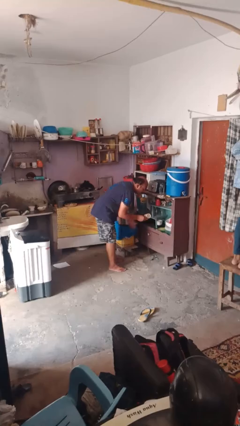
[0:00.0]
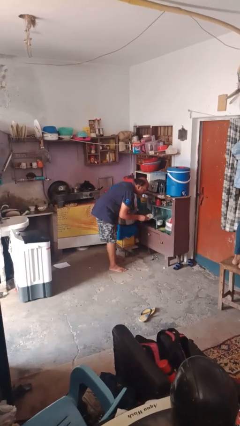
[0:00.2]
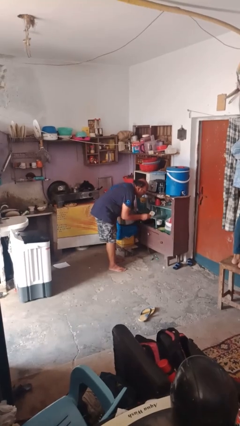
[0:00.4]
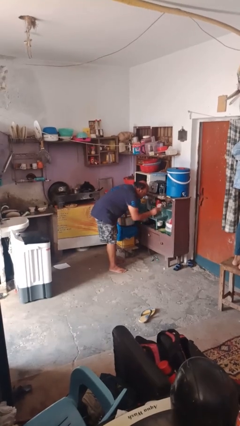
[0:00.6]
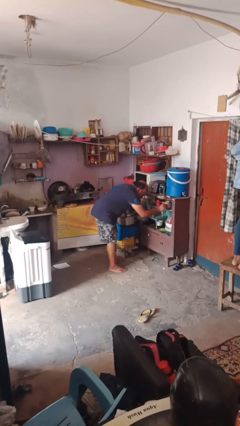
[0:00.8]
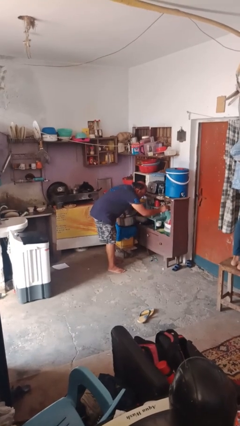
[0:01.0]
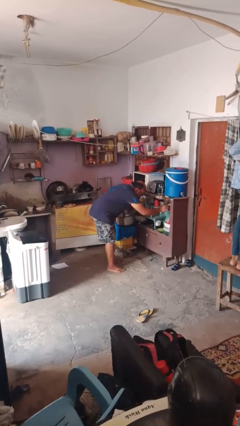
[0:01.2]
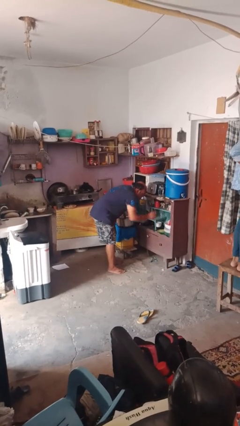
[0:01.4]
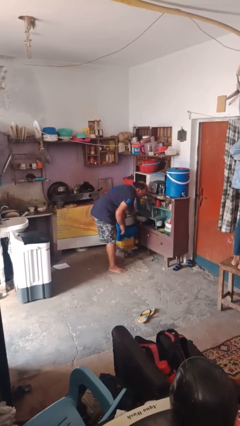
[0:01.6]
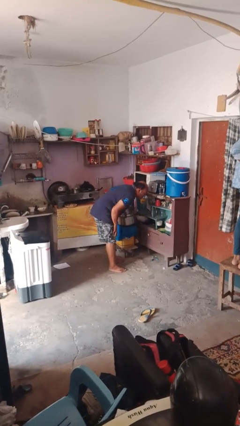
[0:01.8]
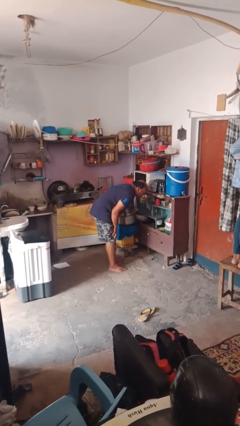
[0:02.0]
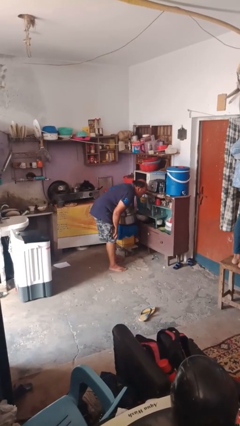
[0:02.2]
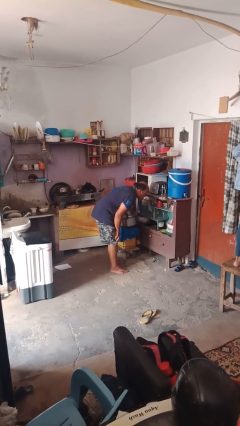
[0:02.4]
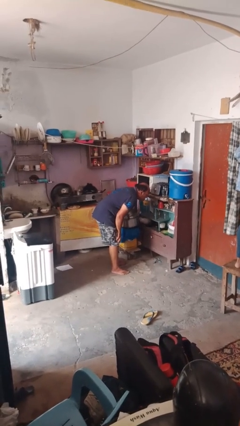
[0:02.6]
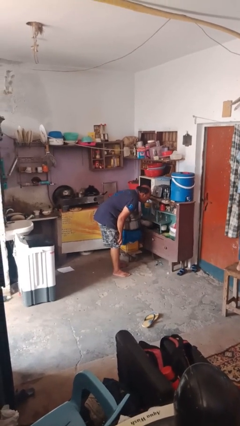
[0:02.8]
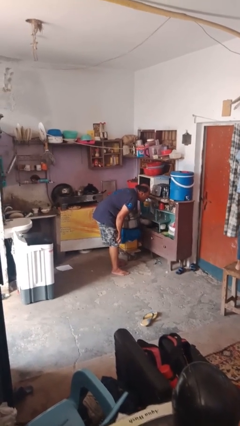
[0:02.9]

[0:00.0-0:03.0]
person puts object into kitchen drawer

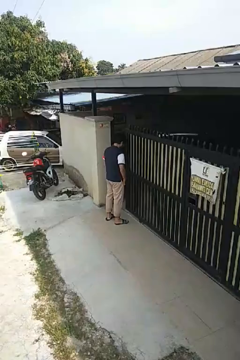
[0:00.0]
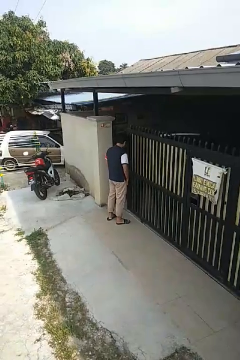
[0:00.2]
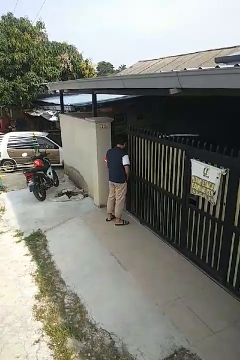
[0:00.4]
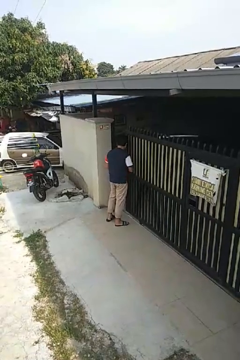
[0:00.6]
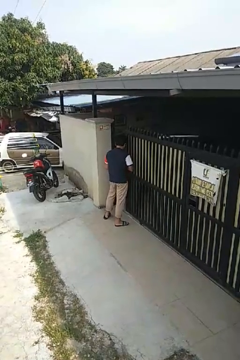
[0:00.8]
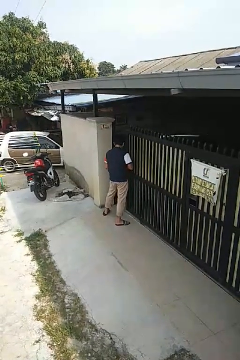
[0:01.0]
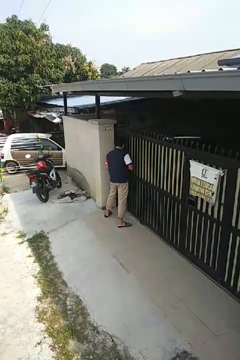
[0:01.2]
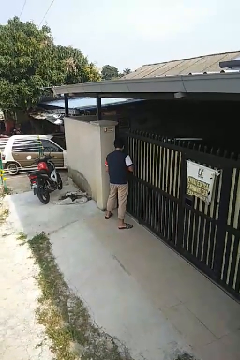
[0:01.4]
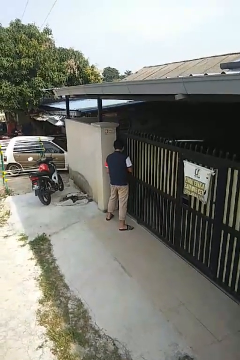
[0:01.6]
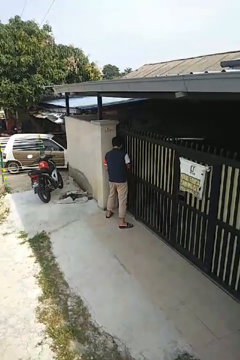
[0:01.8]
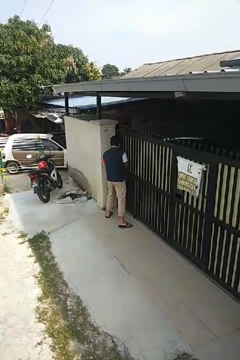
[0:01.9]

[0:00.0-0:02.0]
person closes sliding door

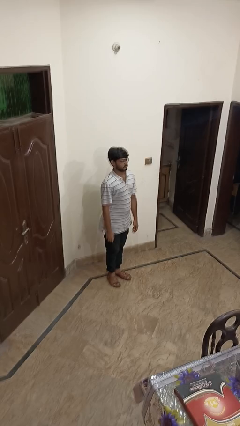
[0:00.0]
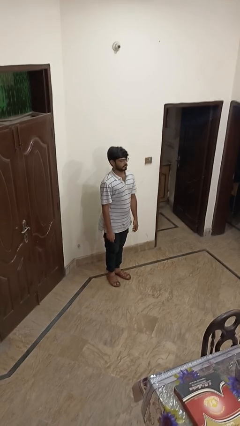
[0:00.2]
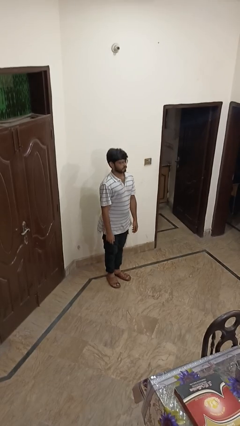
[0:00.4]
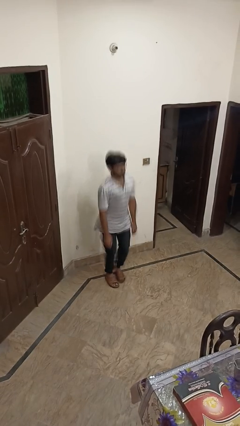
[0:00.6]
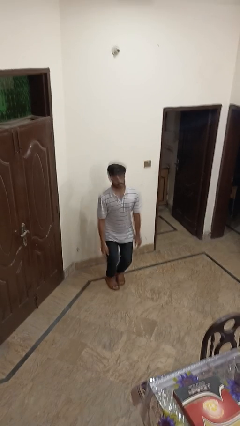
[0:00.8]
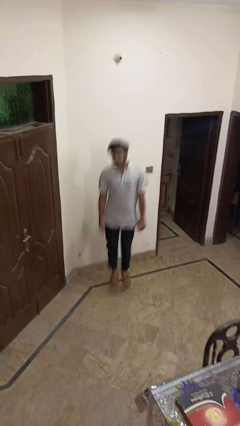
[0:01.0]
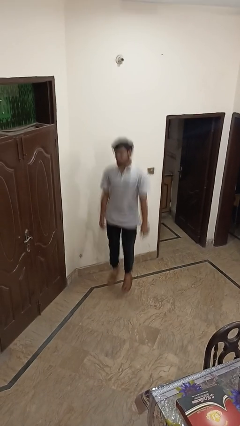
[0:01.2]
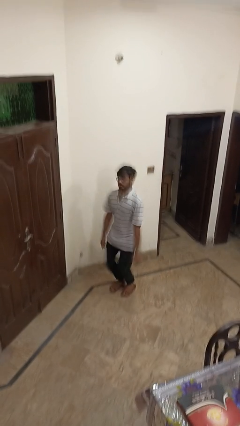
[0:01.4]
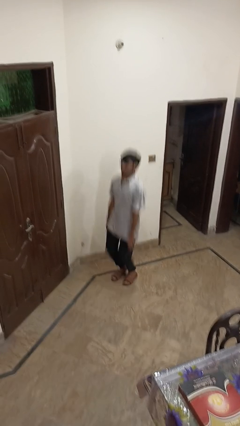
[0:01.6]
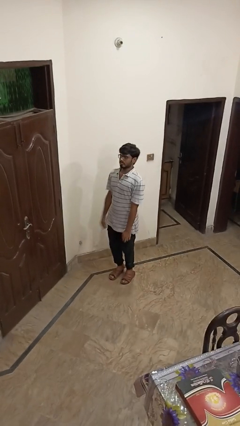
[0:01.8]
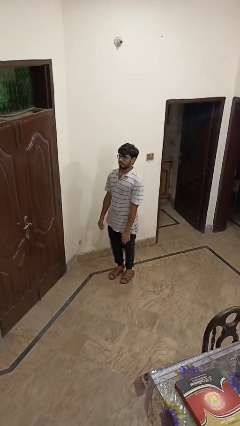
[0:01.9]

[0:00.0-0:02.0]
person jumps

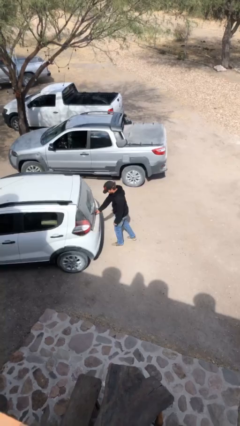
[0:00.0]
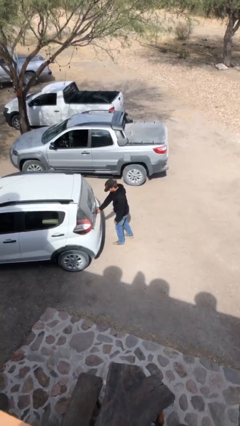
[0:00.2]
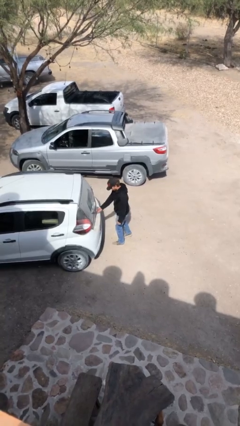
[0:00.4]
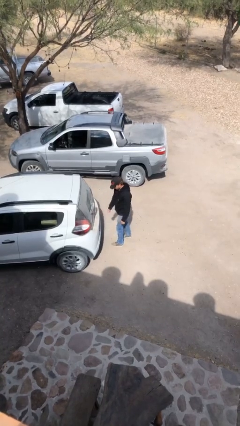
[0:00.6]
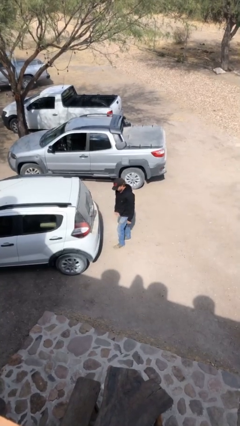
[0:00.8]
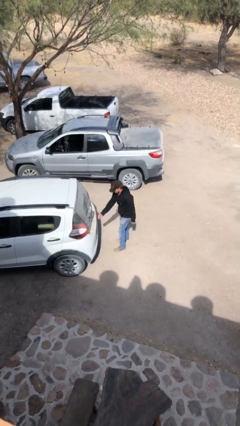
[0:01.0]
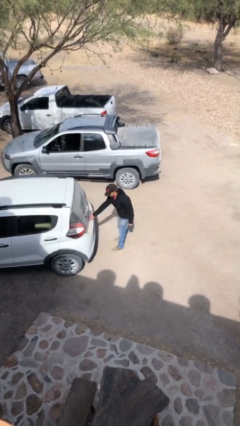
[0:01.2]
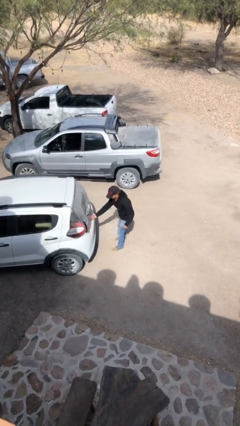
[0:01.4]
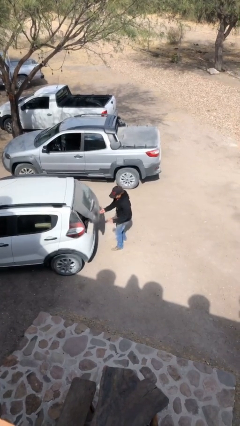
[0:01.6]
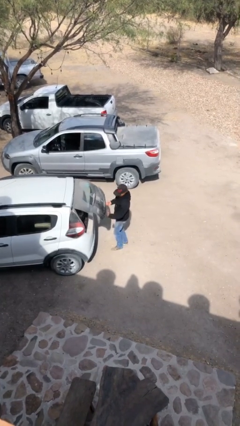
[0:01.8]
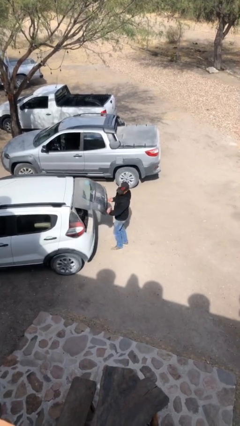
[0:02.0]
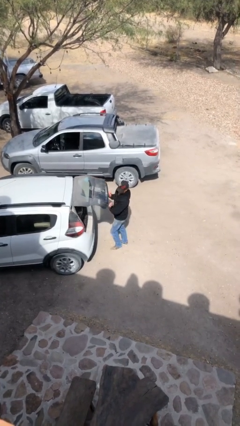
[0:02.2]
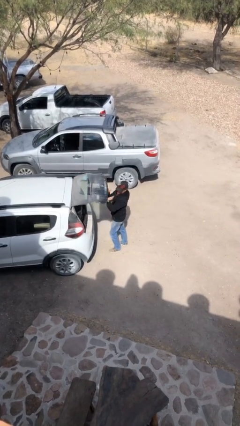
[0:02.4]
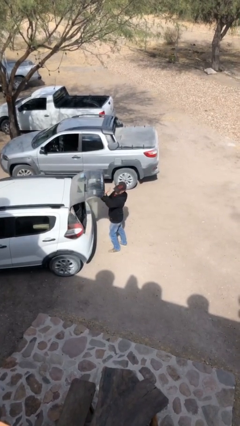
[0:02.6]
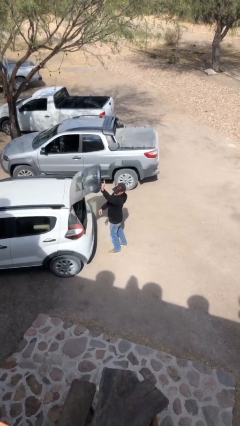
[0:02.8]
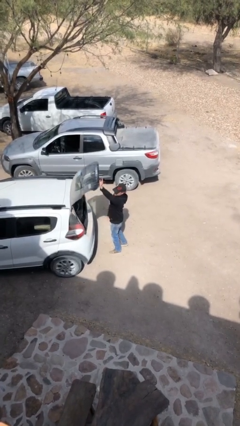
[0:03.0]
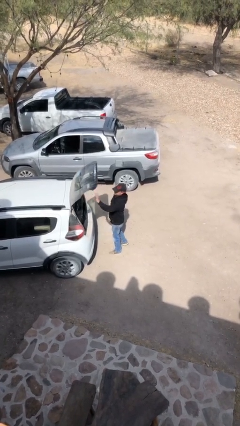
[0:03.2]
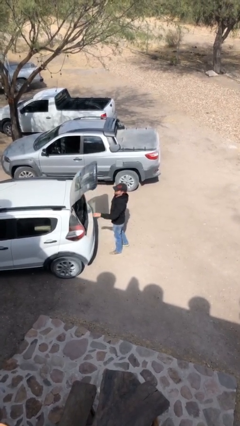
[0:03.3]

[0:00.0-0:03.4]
person opens car trunk

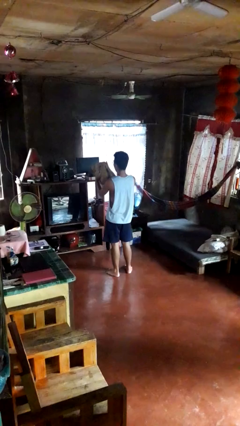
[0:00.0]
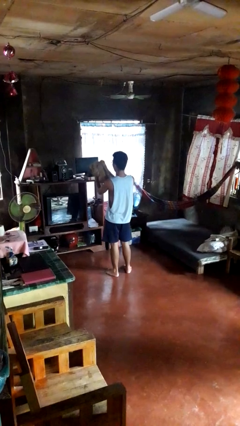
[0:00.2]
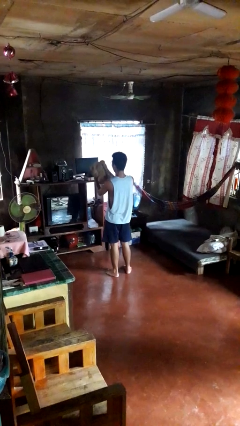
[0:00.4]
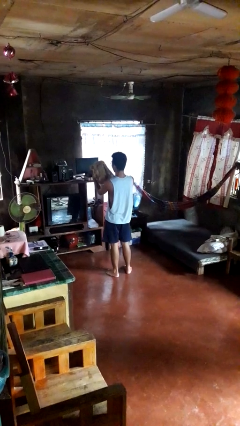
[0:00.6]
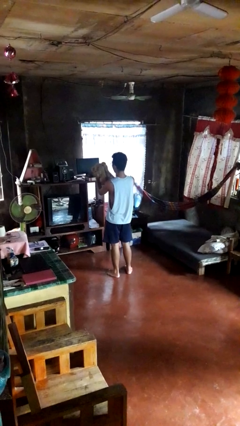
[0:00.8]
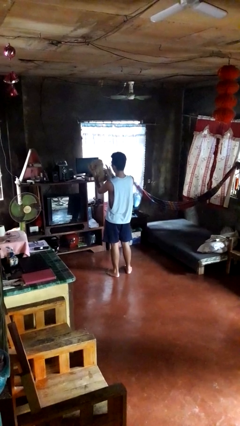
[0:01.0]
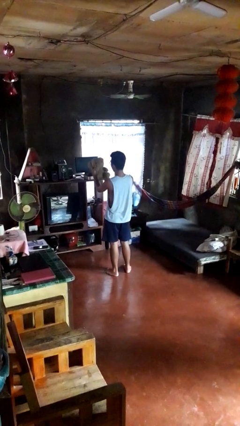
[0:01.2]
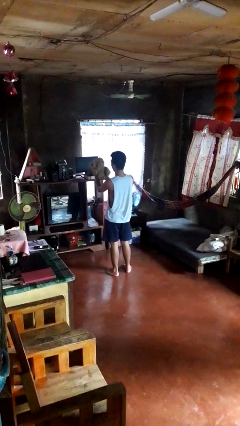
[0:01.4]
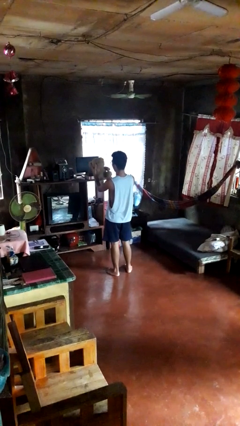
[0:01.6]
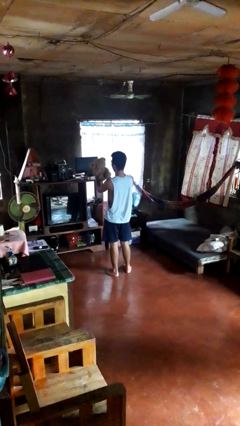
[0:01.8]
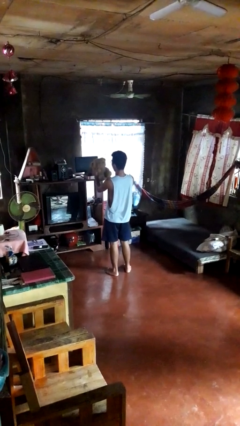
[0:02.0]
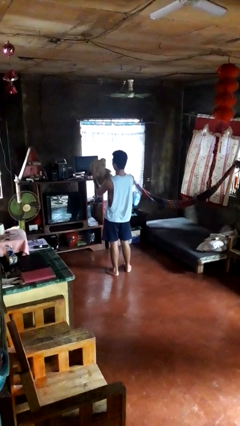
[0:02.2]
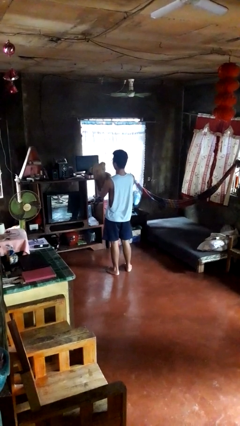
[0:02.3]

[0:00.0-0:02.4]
person squeezes object

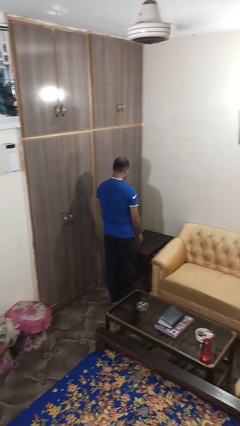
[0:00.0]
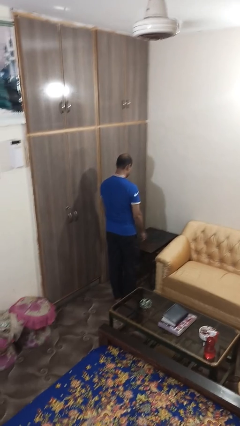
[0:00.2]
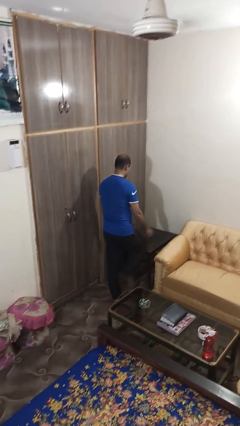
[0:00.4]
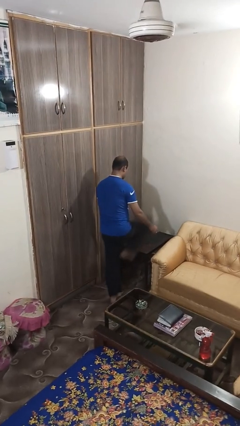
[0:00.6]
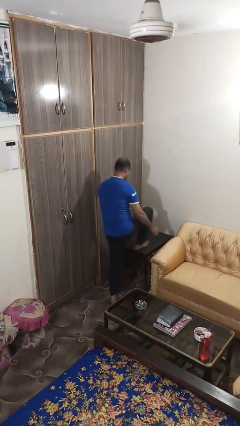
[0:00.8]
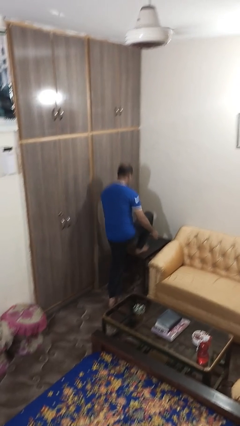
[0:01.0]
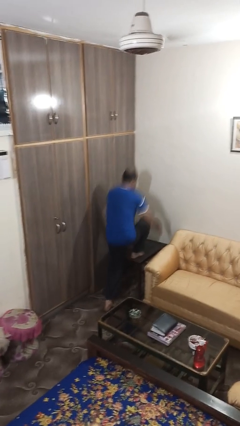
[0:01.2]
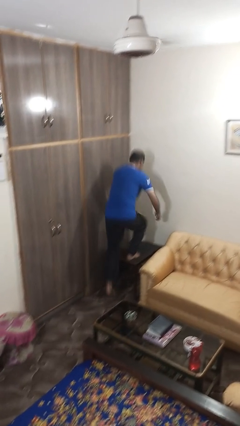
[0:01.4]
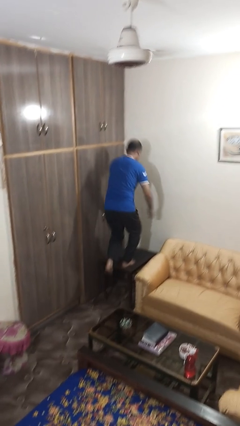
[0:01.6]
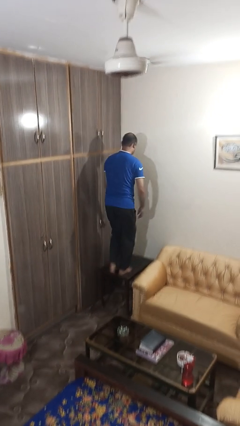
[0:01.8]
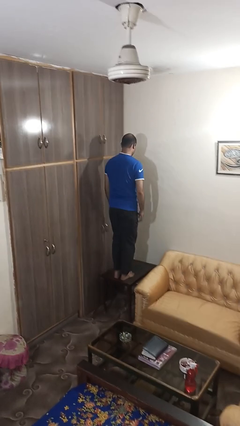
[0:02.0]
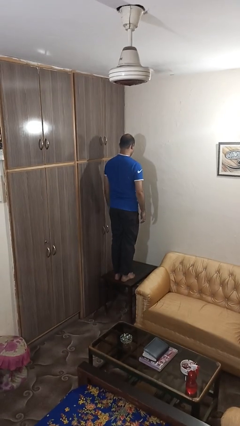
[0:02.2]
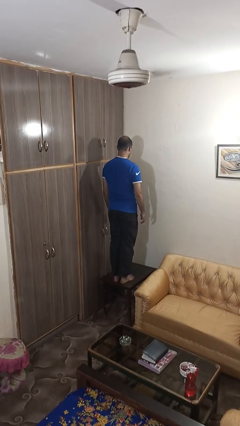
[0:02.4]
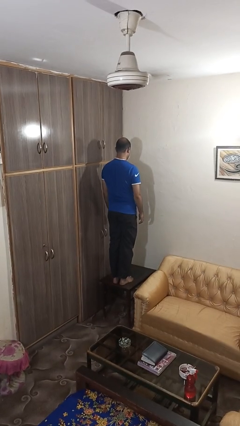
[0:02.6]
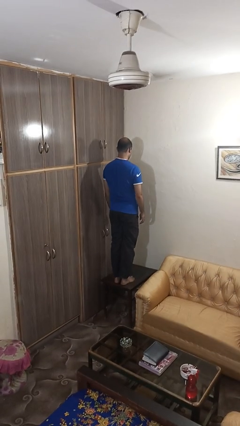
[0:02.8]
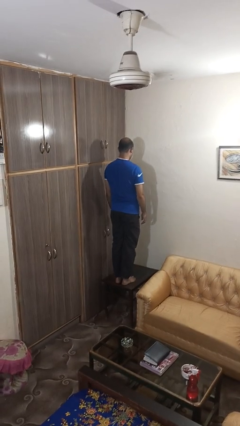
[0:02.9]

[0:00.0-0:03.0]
person climbs on table

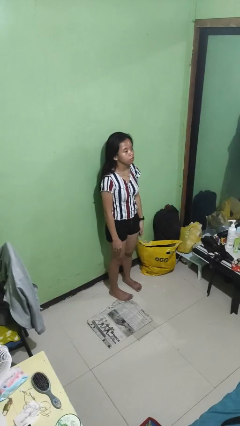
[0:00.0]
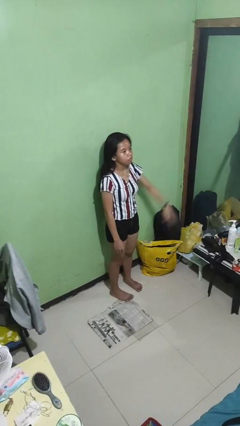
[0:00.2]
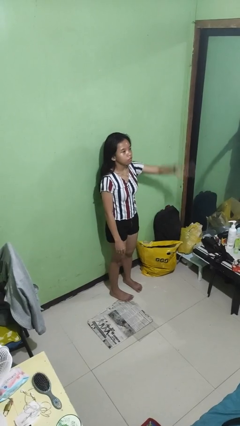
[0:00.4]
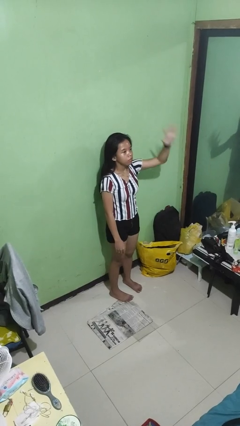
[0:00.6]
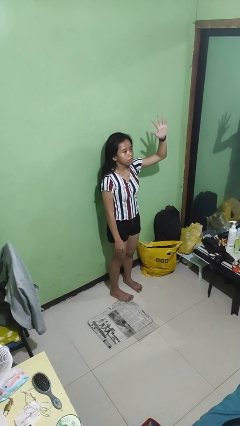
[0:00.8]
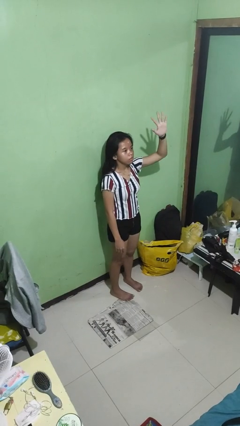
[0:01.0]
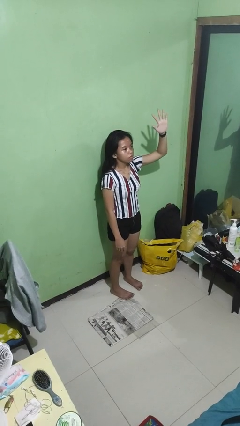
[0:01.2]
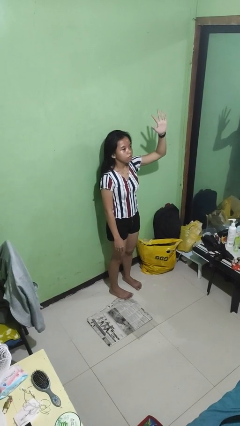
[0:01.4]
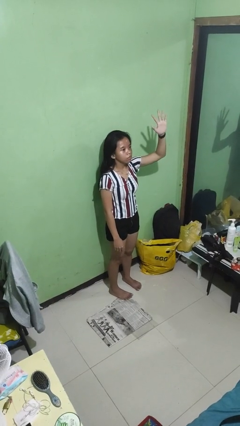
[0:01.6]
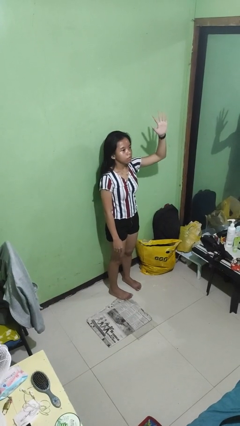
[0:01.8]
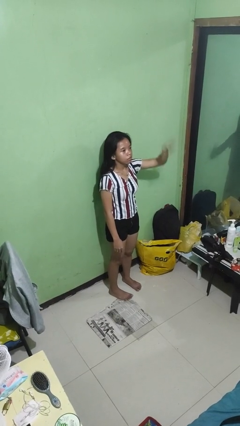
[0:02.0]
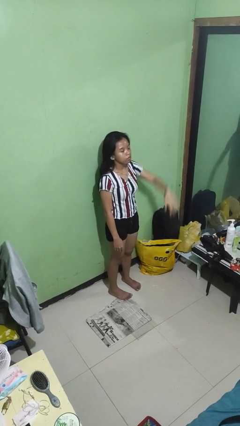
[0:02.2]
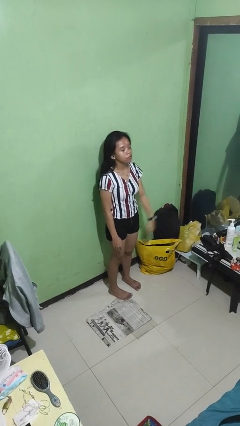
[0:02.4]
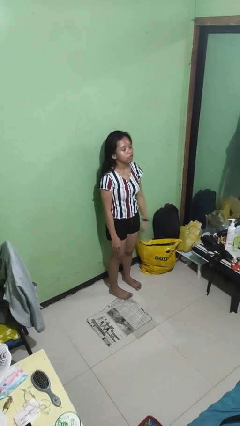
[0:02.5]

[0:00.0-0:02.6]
person gestures number five
